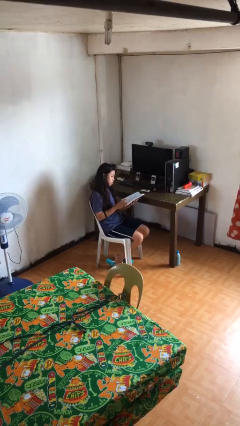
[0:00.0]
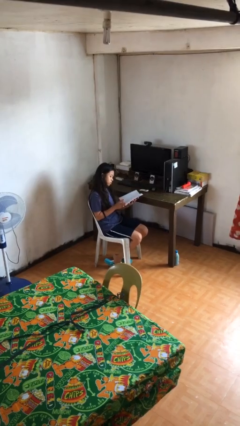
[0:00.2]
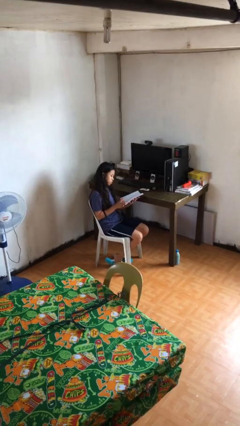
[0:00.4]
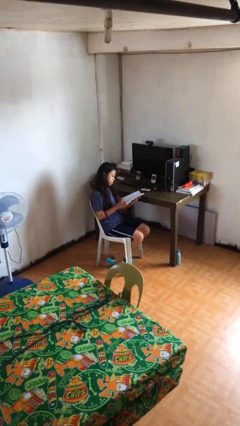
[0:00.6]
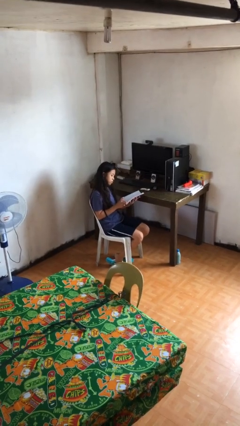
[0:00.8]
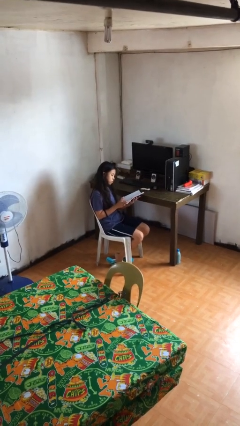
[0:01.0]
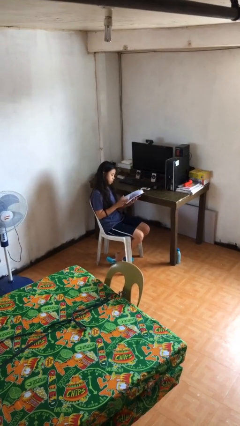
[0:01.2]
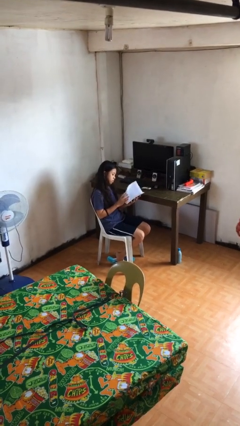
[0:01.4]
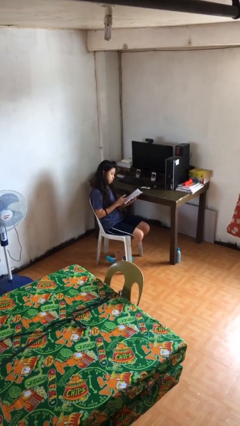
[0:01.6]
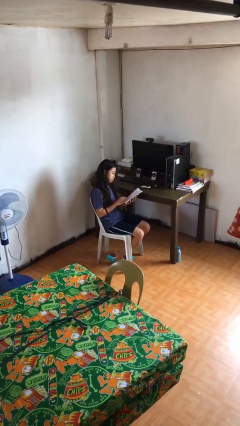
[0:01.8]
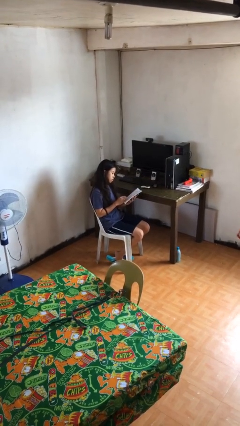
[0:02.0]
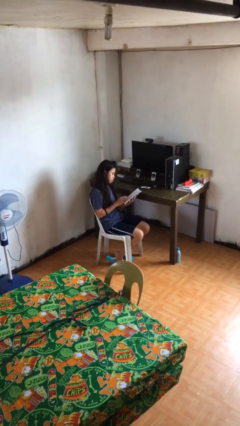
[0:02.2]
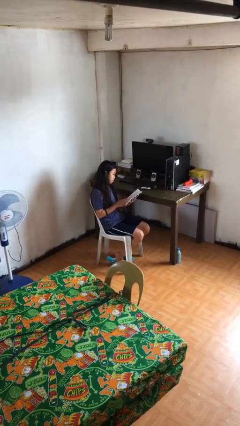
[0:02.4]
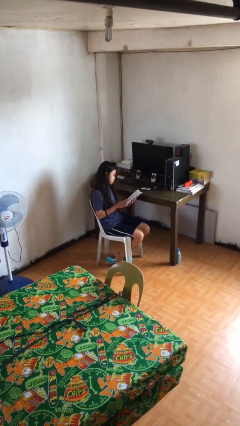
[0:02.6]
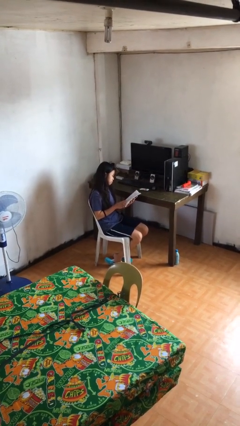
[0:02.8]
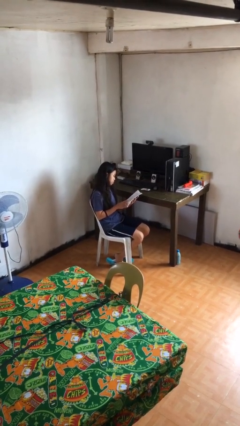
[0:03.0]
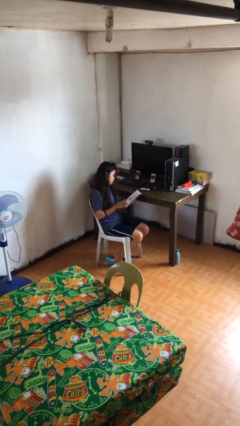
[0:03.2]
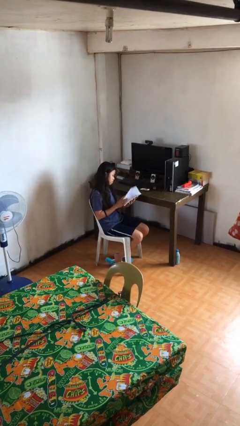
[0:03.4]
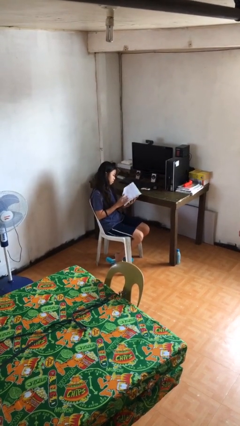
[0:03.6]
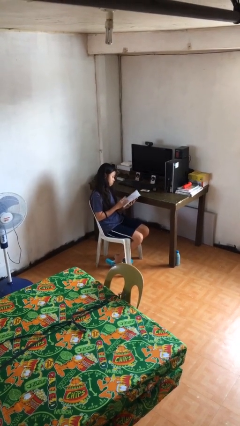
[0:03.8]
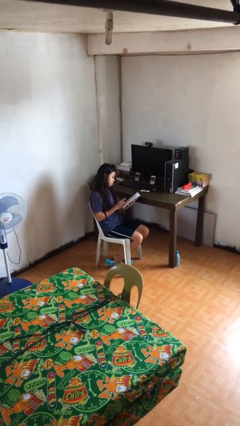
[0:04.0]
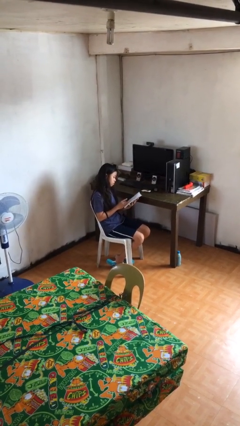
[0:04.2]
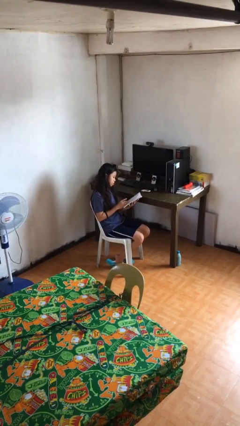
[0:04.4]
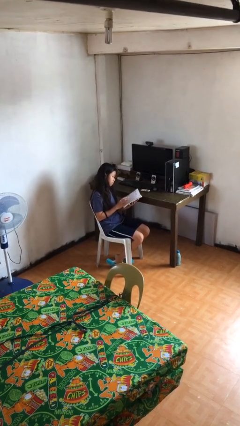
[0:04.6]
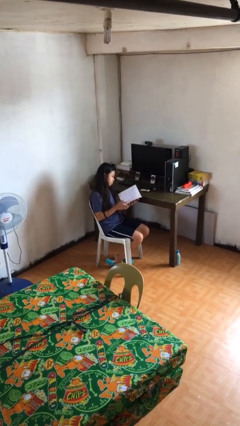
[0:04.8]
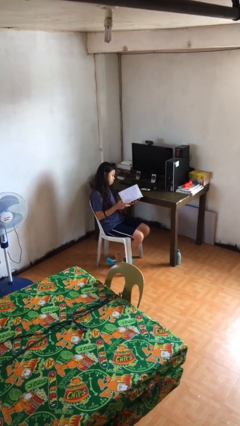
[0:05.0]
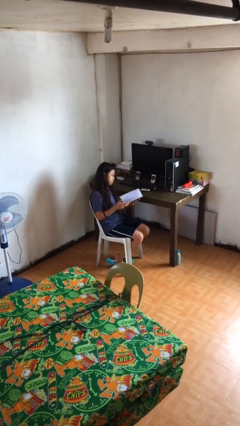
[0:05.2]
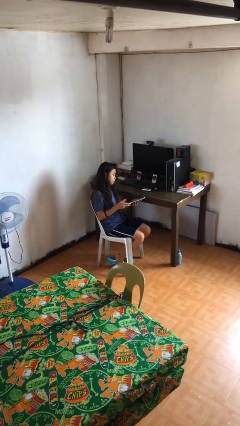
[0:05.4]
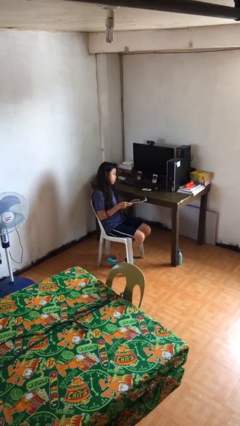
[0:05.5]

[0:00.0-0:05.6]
person reads document

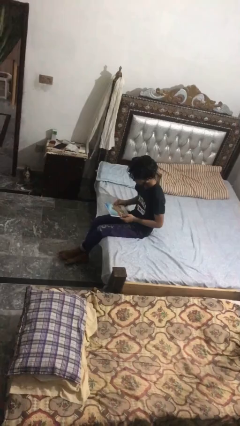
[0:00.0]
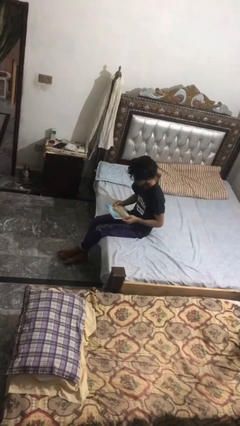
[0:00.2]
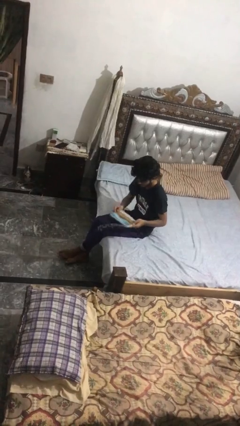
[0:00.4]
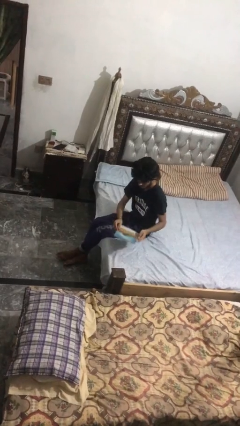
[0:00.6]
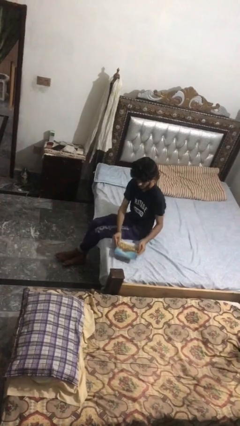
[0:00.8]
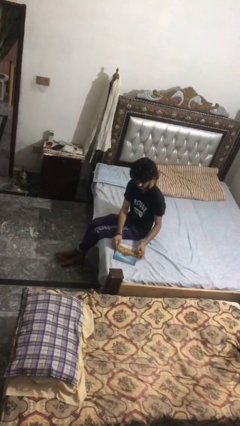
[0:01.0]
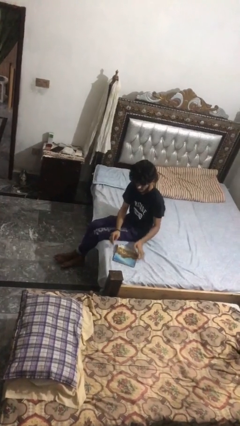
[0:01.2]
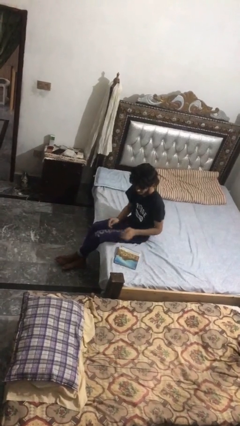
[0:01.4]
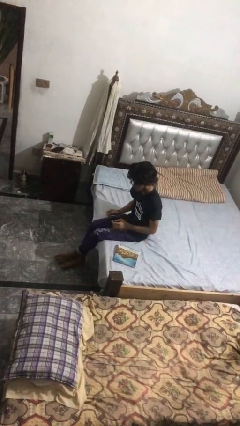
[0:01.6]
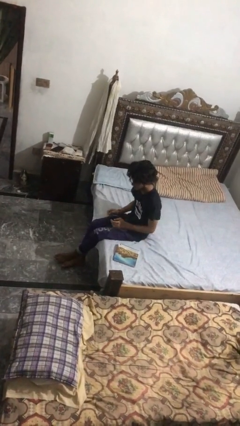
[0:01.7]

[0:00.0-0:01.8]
person puts down object on bed

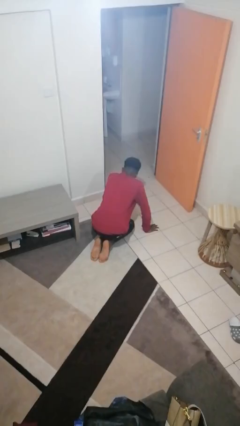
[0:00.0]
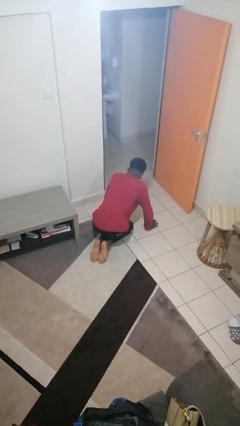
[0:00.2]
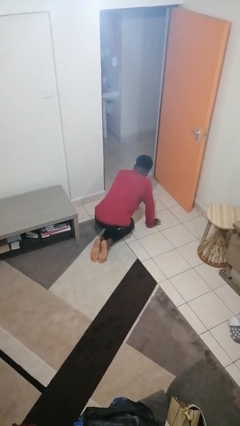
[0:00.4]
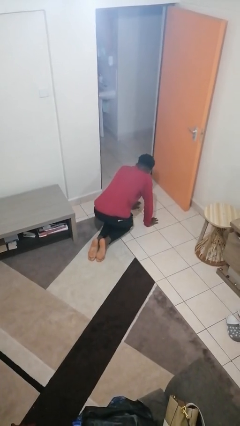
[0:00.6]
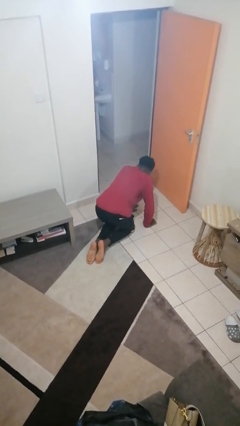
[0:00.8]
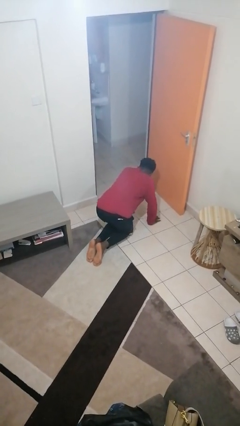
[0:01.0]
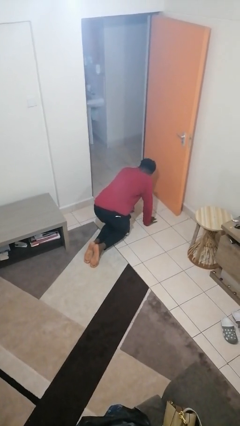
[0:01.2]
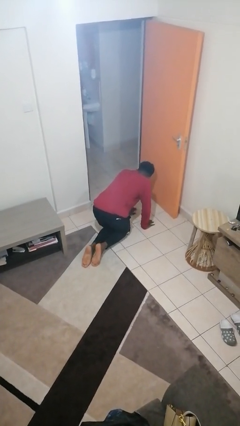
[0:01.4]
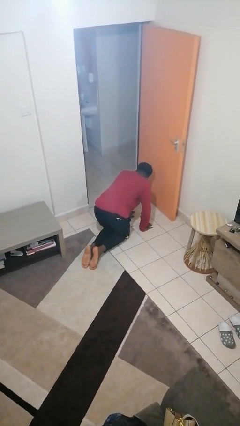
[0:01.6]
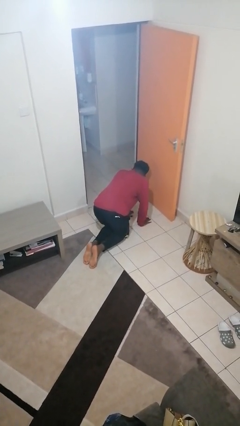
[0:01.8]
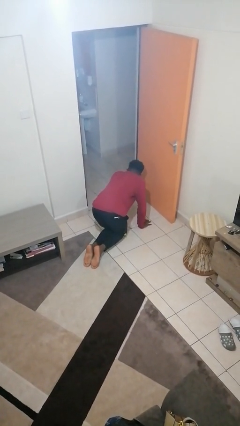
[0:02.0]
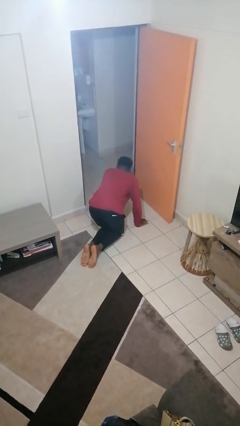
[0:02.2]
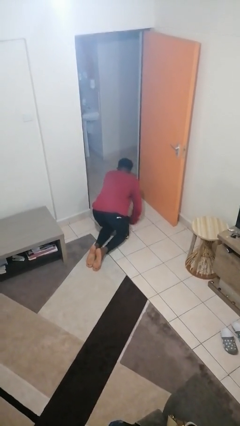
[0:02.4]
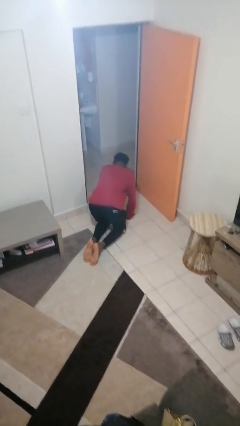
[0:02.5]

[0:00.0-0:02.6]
person crawls

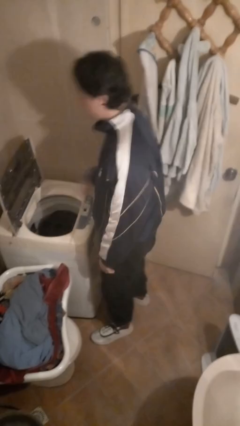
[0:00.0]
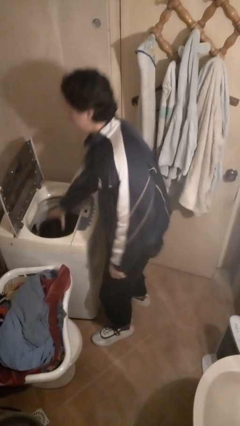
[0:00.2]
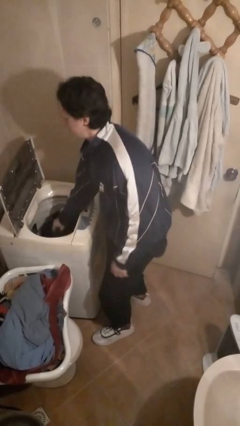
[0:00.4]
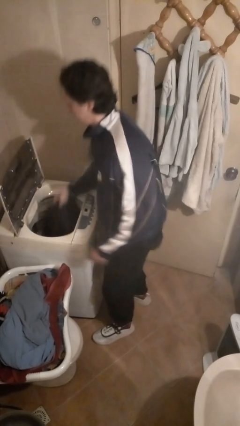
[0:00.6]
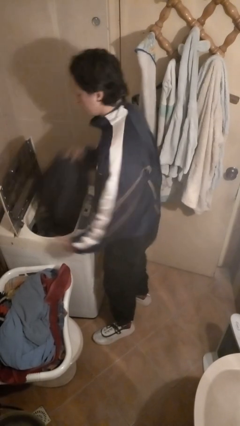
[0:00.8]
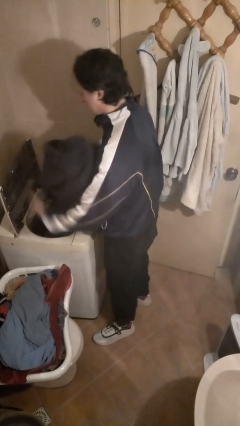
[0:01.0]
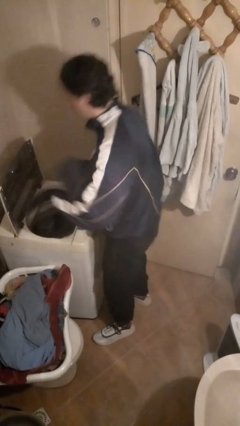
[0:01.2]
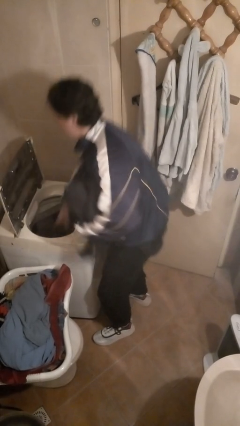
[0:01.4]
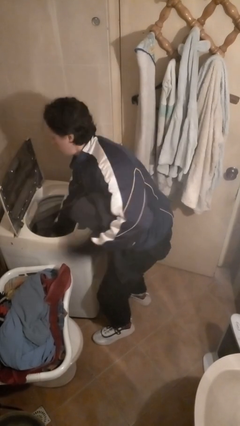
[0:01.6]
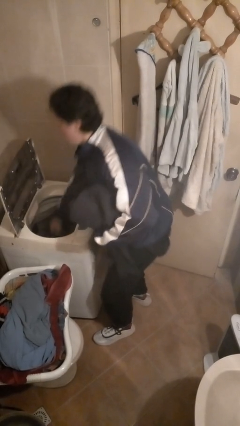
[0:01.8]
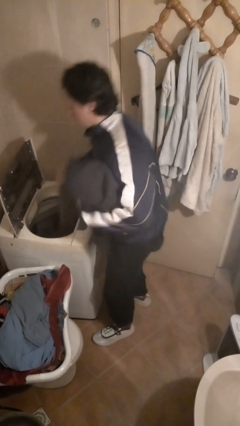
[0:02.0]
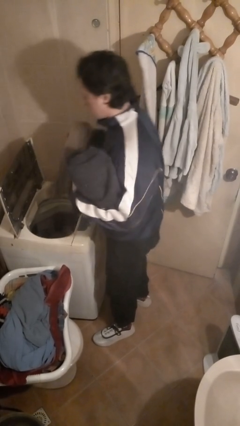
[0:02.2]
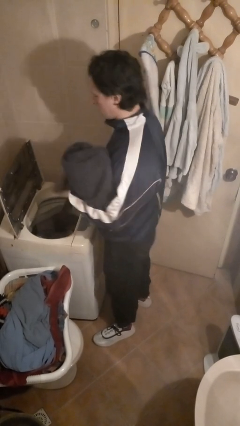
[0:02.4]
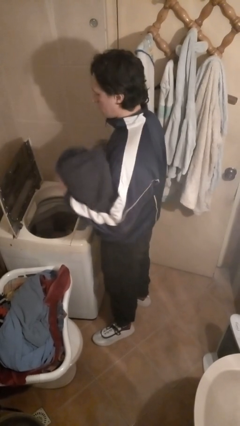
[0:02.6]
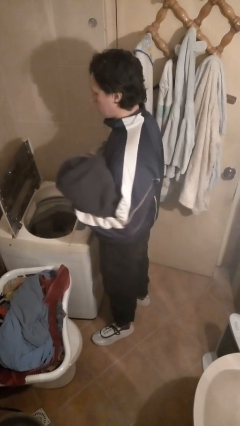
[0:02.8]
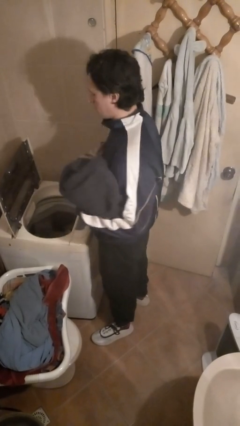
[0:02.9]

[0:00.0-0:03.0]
person loads clotheswasher

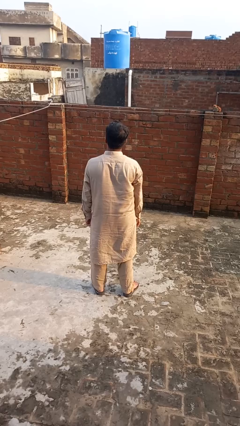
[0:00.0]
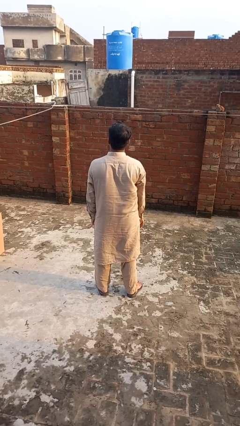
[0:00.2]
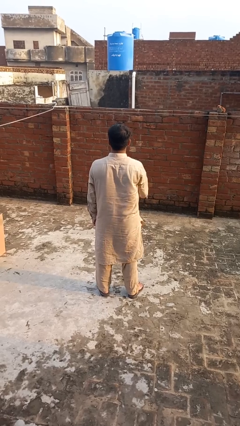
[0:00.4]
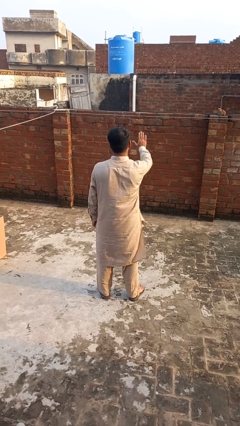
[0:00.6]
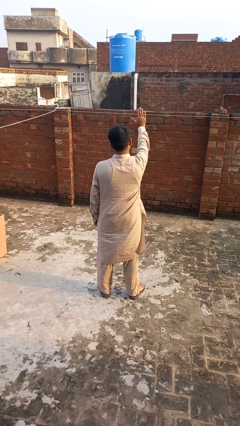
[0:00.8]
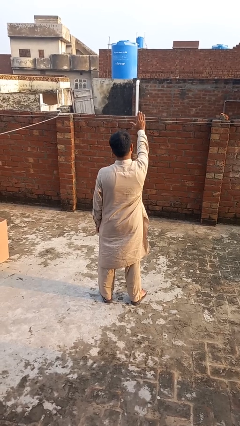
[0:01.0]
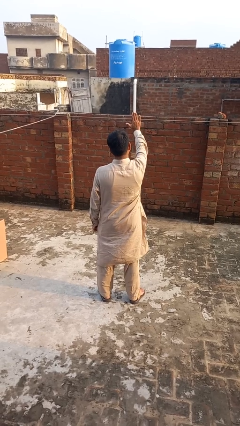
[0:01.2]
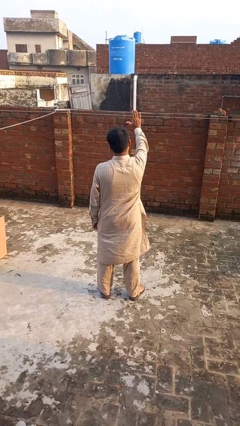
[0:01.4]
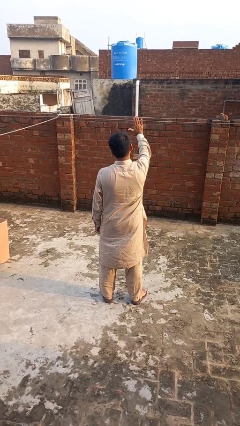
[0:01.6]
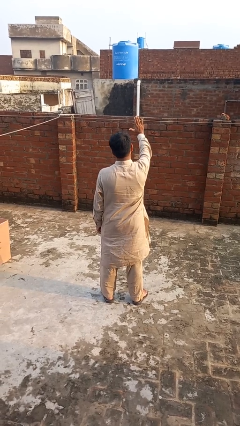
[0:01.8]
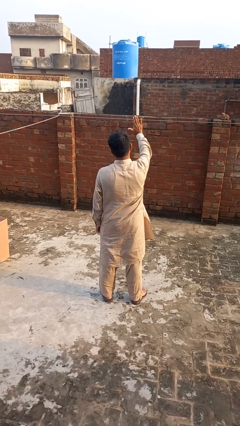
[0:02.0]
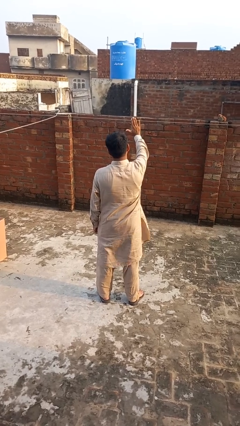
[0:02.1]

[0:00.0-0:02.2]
person gestures stop

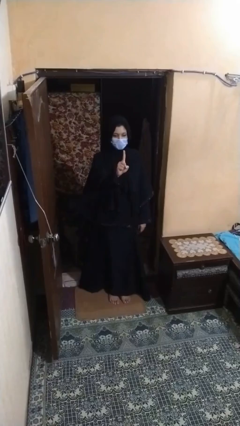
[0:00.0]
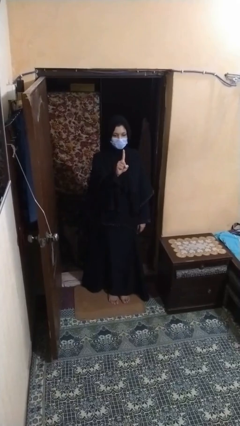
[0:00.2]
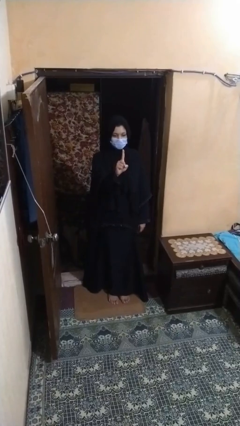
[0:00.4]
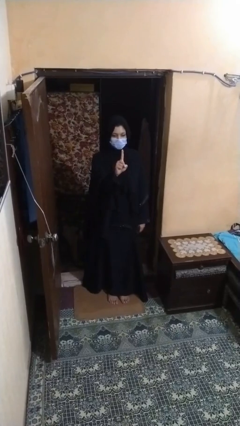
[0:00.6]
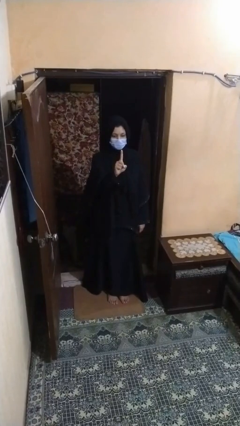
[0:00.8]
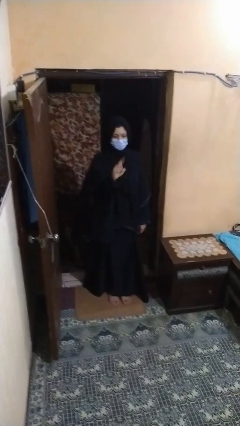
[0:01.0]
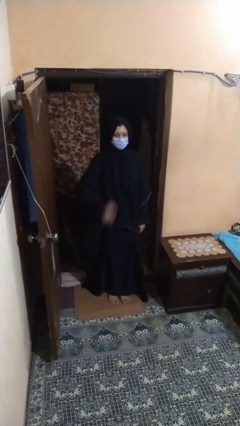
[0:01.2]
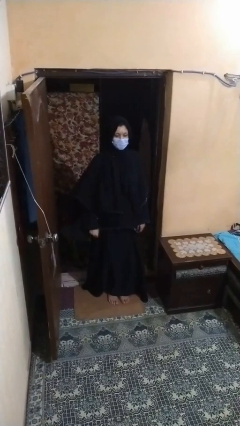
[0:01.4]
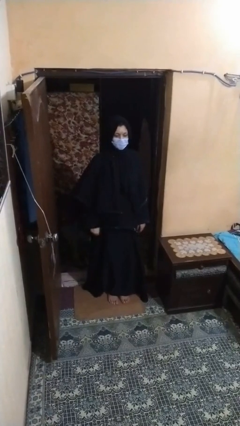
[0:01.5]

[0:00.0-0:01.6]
person gestures number one
